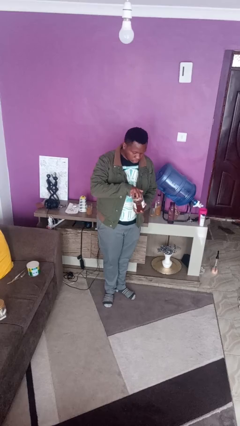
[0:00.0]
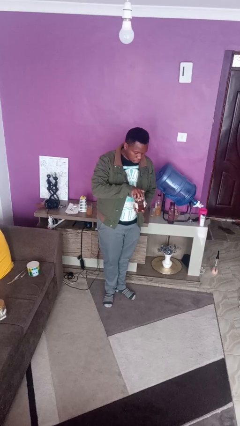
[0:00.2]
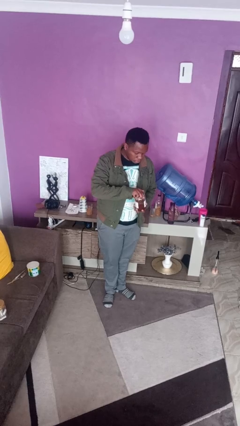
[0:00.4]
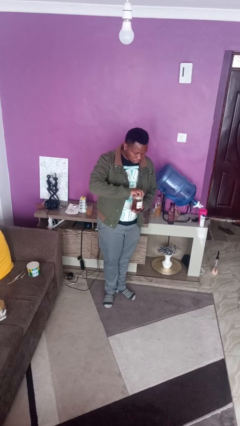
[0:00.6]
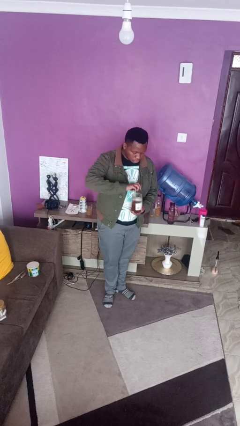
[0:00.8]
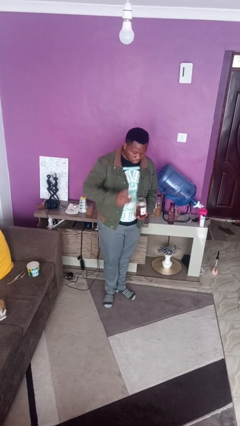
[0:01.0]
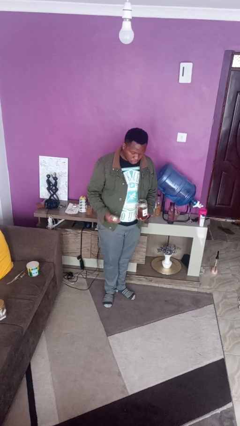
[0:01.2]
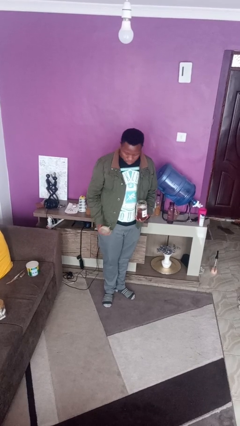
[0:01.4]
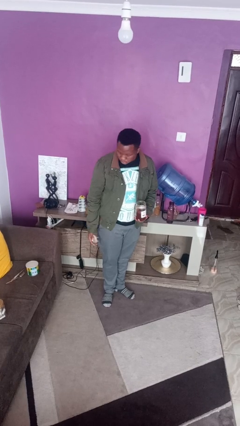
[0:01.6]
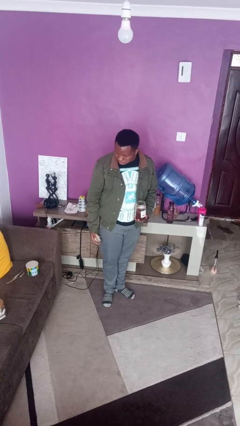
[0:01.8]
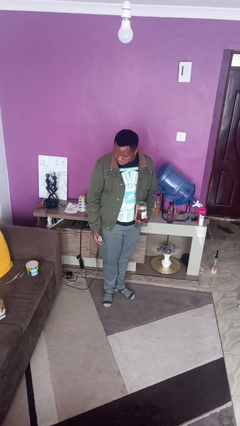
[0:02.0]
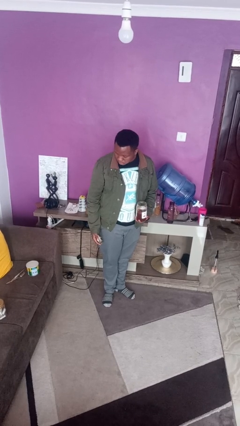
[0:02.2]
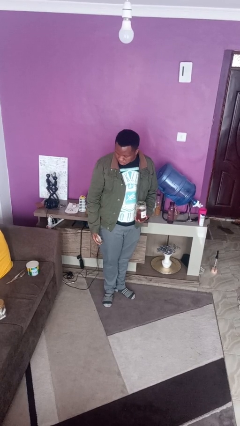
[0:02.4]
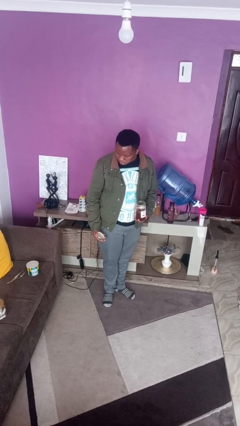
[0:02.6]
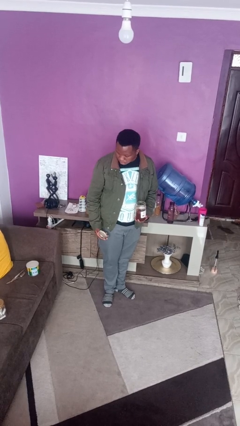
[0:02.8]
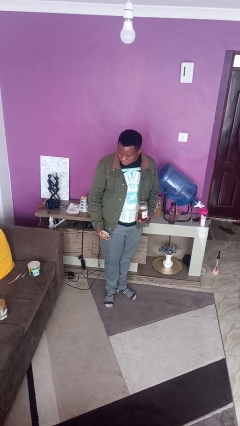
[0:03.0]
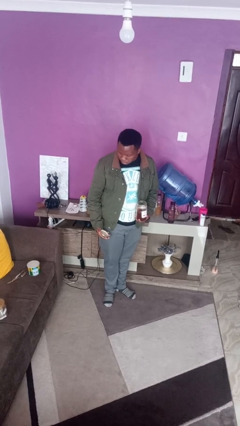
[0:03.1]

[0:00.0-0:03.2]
person opens jar

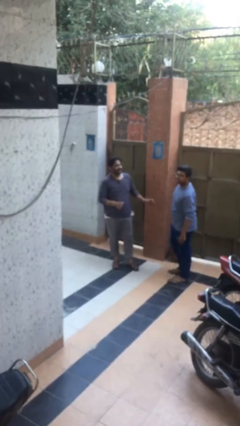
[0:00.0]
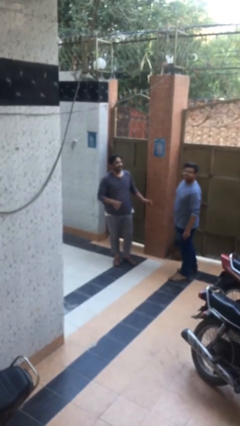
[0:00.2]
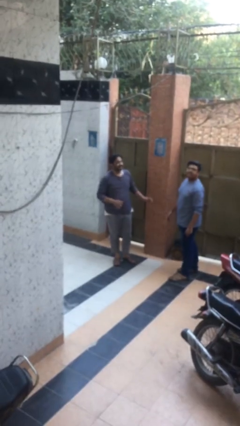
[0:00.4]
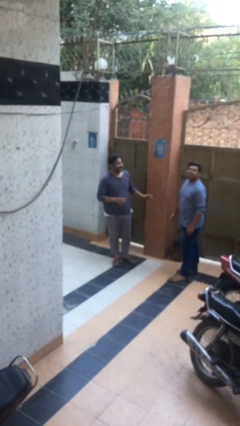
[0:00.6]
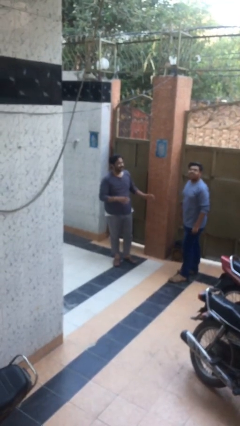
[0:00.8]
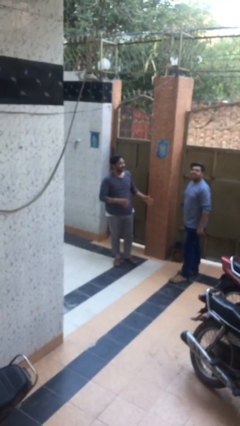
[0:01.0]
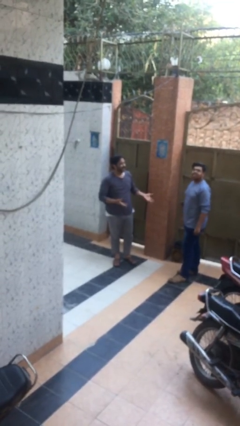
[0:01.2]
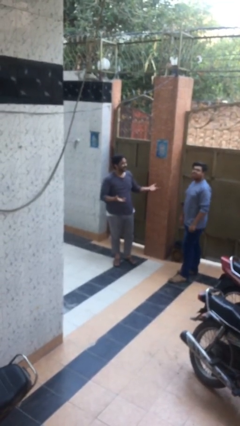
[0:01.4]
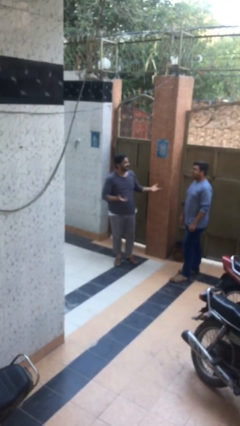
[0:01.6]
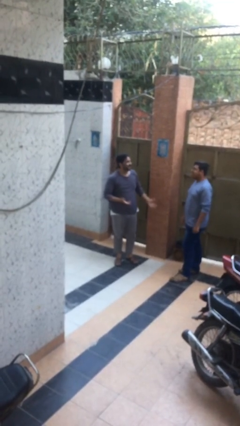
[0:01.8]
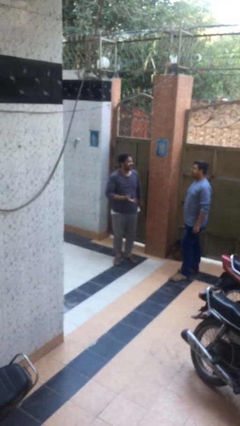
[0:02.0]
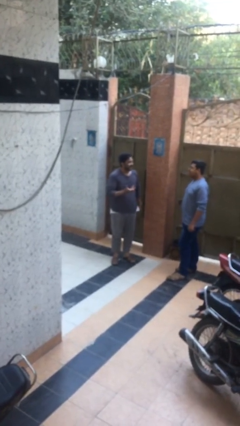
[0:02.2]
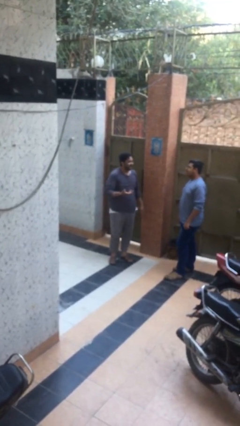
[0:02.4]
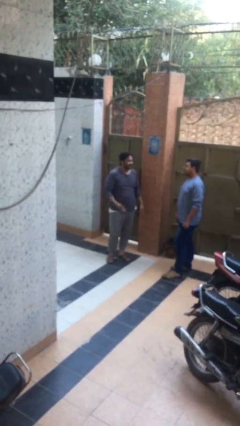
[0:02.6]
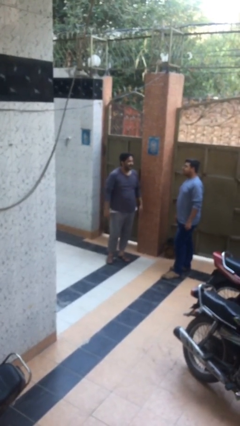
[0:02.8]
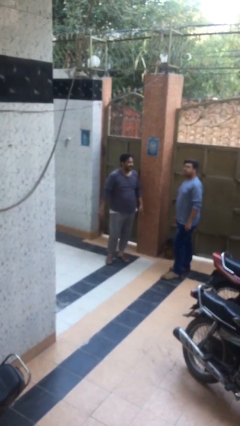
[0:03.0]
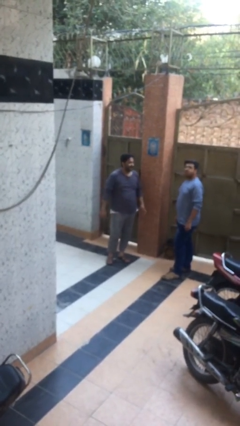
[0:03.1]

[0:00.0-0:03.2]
person talks to person

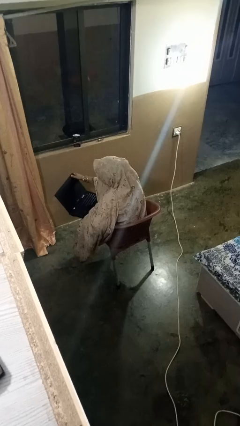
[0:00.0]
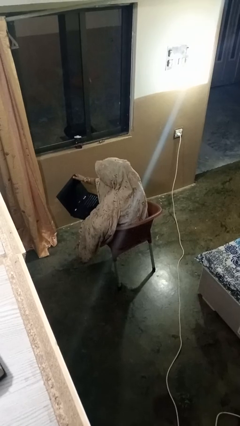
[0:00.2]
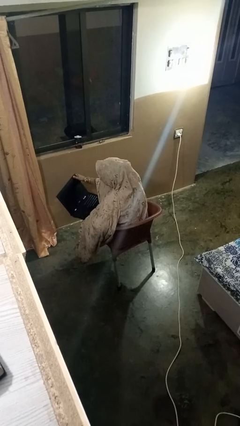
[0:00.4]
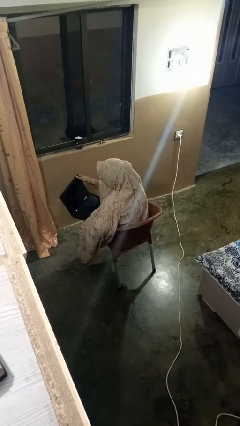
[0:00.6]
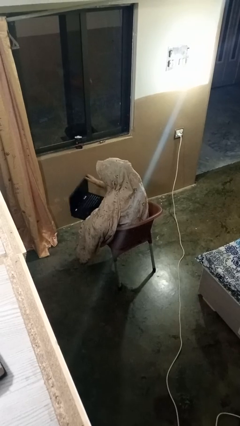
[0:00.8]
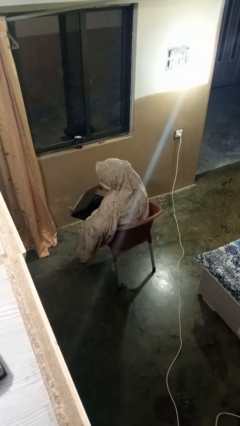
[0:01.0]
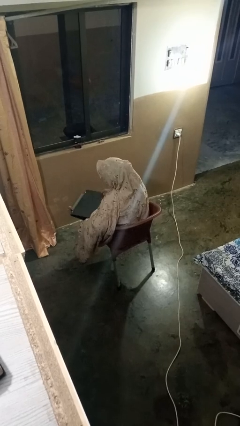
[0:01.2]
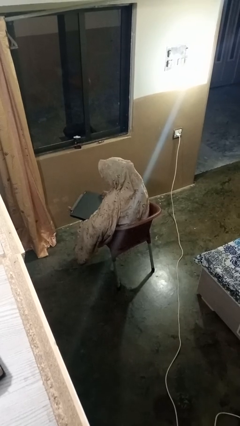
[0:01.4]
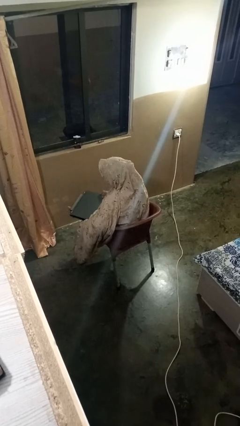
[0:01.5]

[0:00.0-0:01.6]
person closes laptop

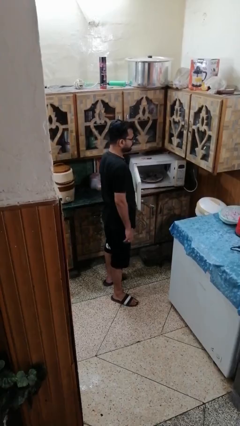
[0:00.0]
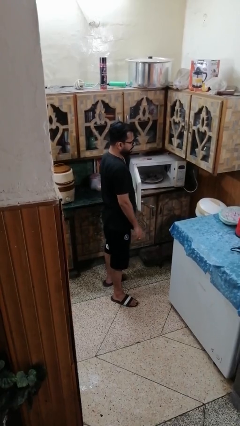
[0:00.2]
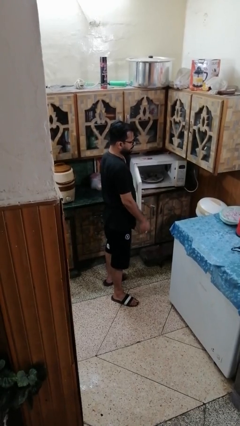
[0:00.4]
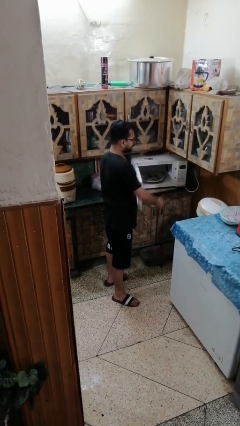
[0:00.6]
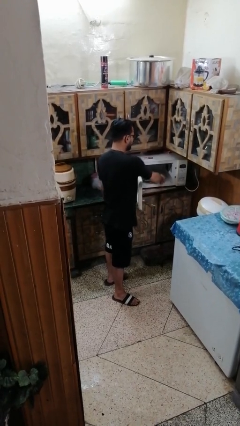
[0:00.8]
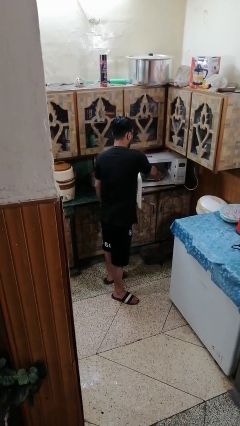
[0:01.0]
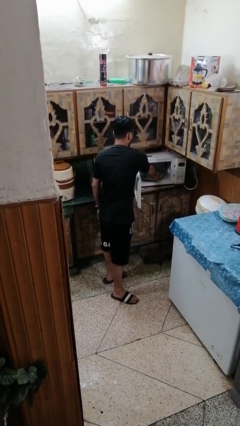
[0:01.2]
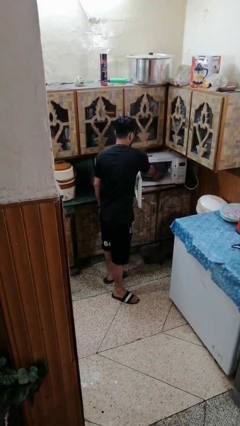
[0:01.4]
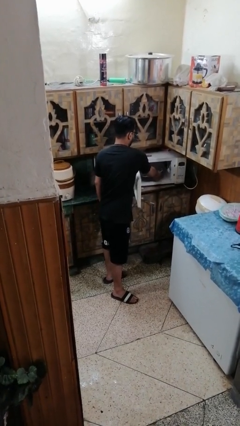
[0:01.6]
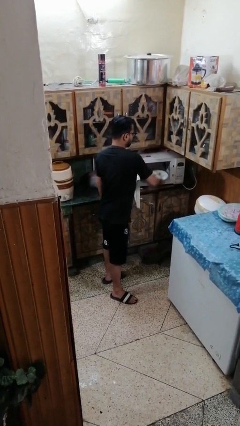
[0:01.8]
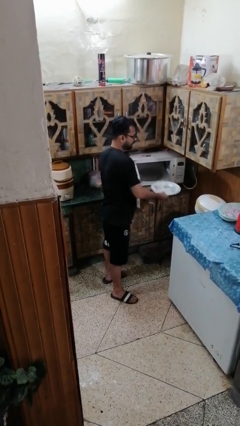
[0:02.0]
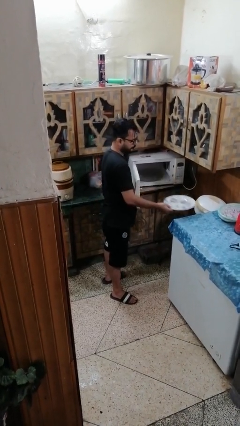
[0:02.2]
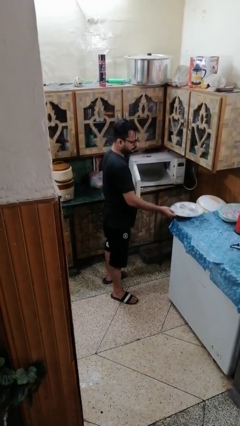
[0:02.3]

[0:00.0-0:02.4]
person takes object from microwave

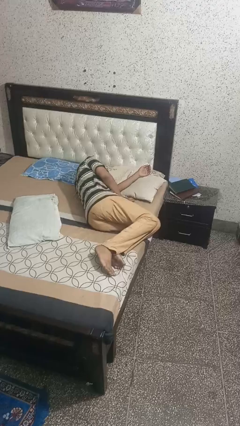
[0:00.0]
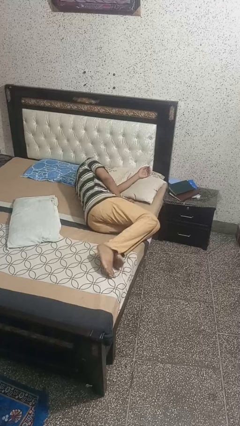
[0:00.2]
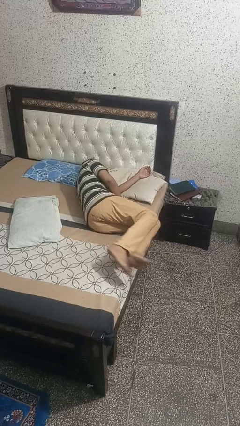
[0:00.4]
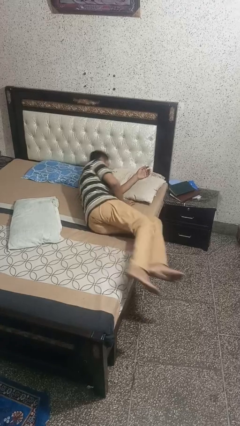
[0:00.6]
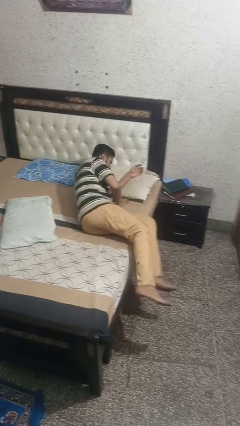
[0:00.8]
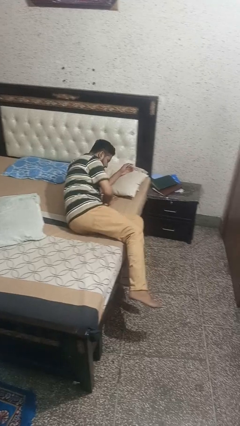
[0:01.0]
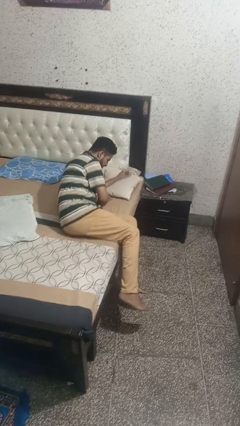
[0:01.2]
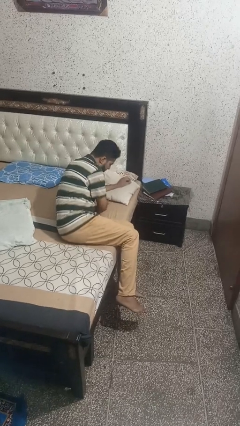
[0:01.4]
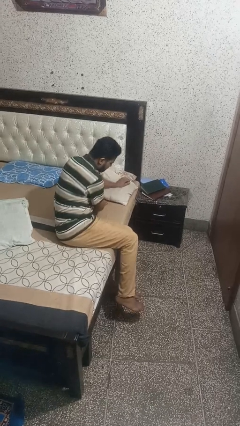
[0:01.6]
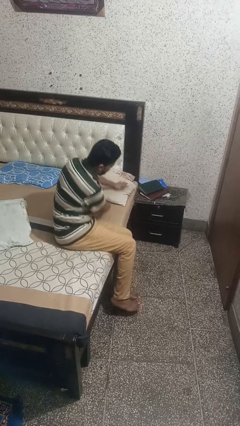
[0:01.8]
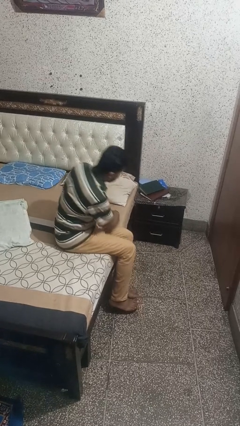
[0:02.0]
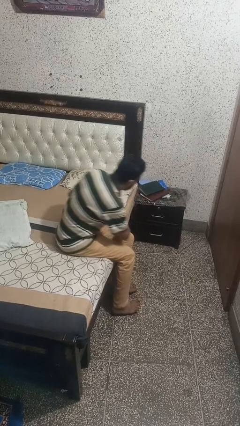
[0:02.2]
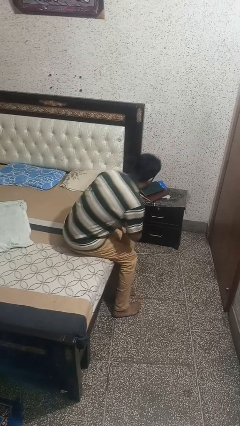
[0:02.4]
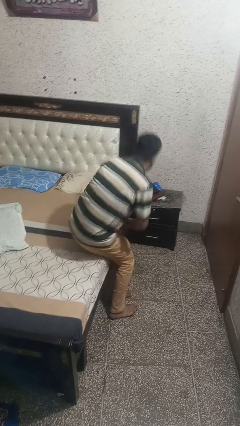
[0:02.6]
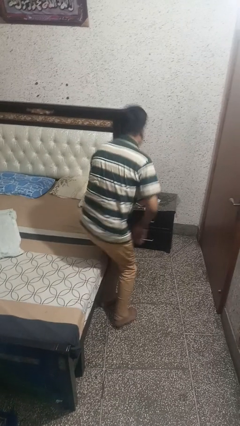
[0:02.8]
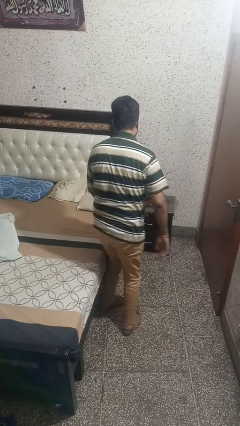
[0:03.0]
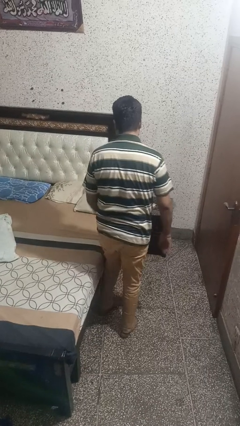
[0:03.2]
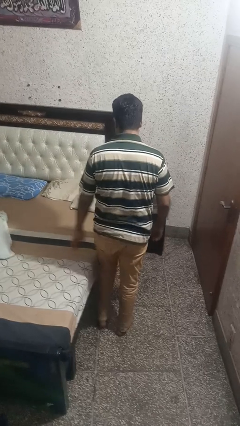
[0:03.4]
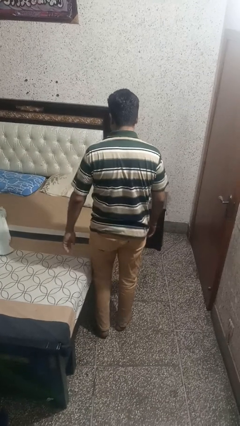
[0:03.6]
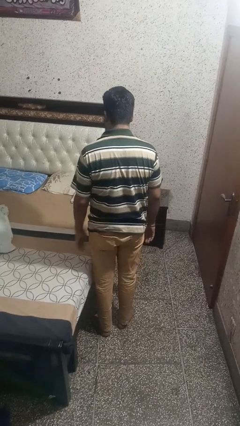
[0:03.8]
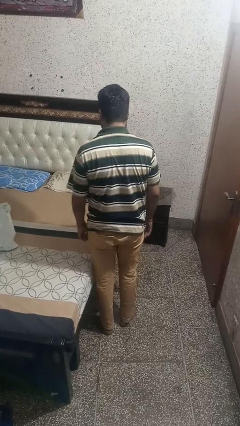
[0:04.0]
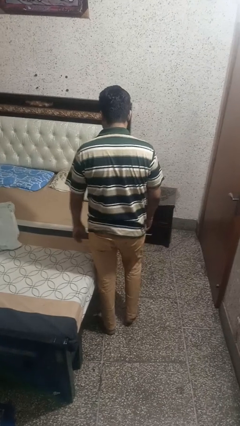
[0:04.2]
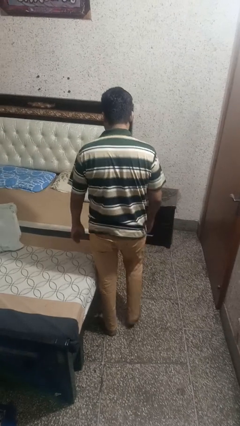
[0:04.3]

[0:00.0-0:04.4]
person stands up

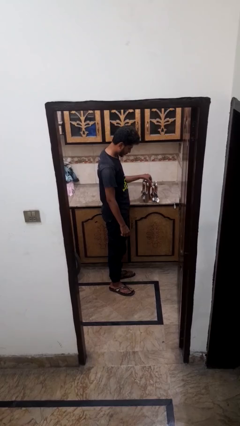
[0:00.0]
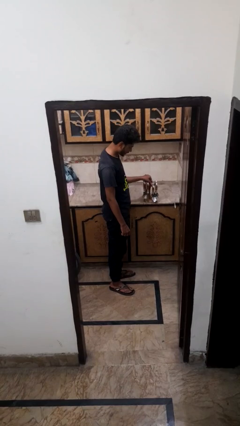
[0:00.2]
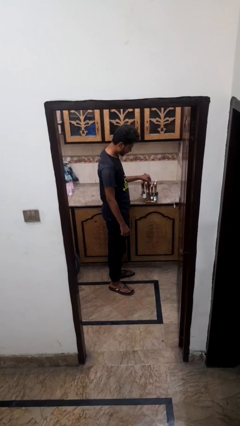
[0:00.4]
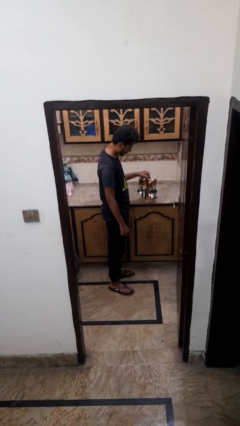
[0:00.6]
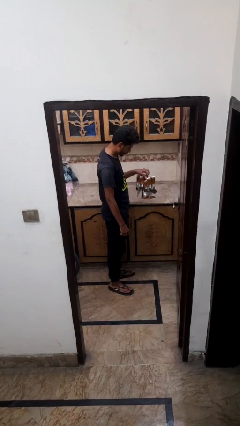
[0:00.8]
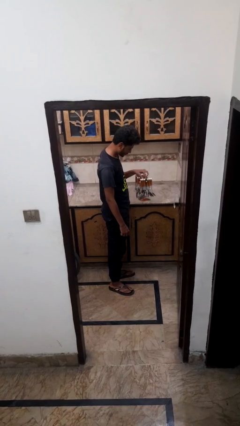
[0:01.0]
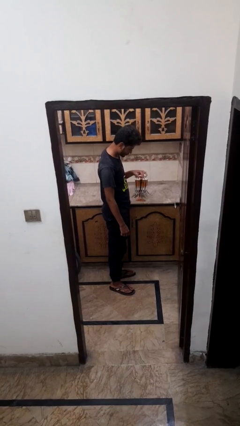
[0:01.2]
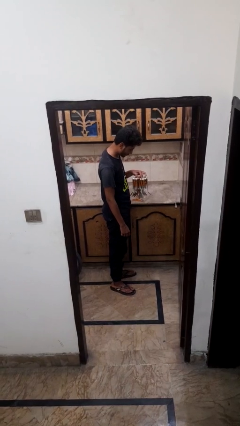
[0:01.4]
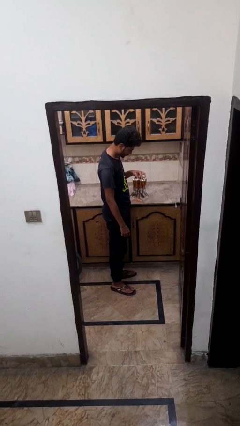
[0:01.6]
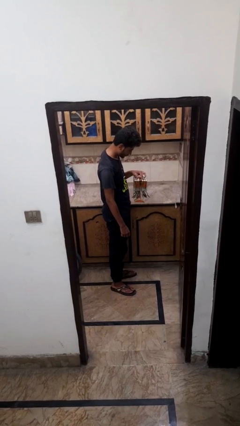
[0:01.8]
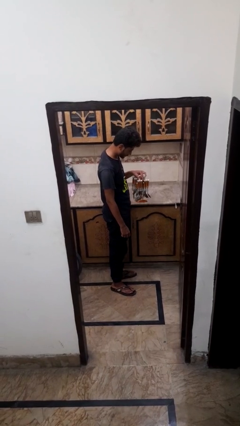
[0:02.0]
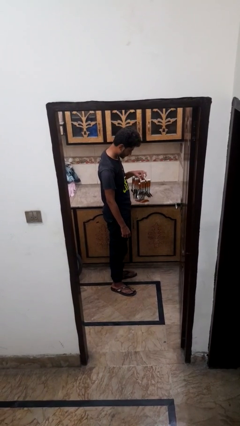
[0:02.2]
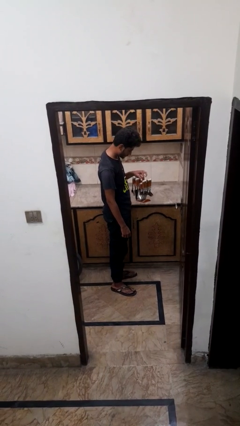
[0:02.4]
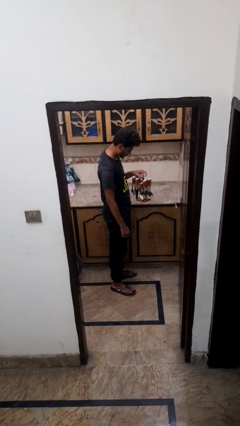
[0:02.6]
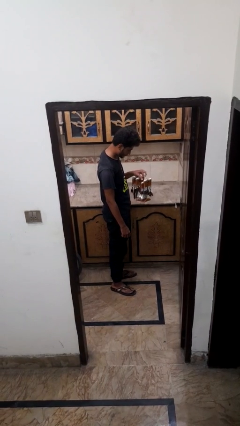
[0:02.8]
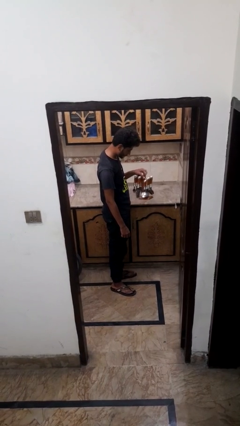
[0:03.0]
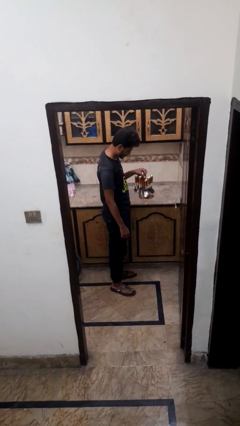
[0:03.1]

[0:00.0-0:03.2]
person picks up object from countertop
